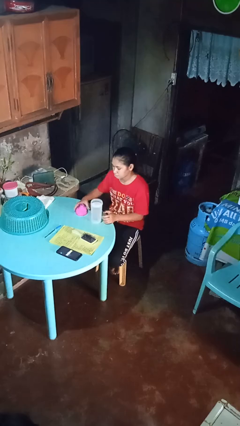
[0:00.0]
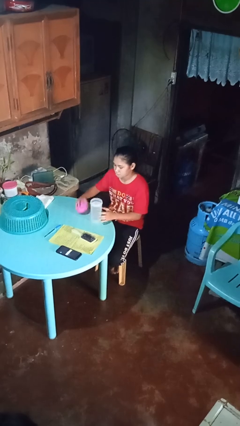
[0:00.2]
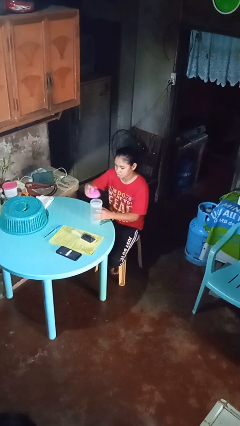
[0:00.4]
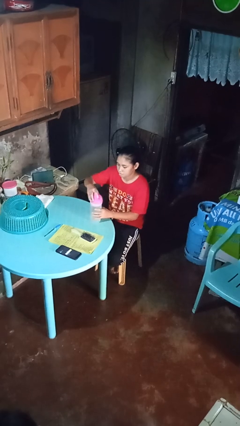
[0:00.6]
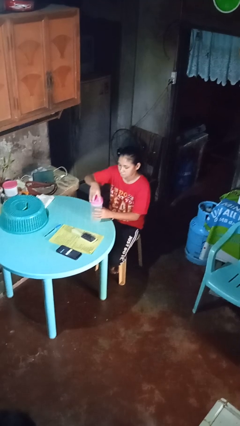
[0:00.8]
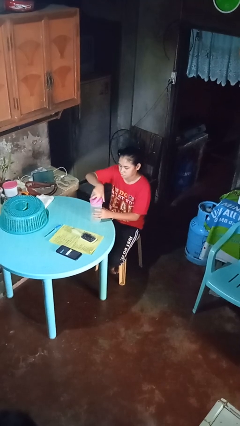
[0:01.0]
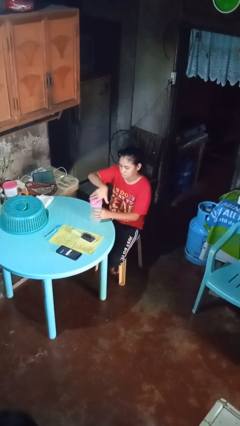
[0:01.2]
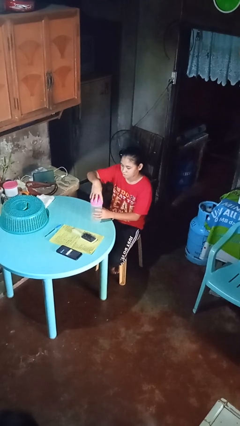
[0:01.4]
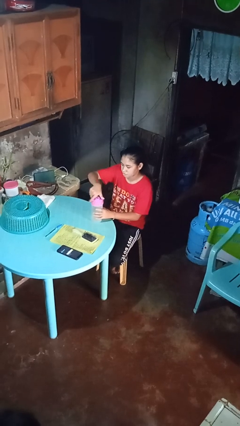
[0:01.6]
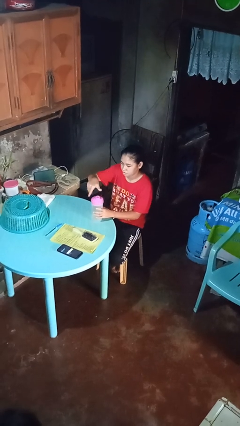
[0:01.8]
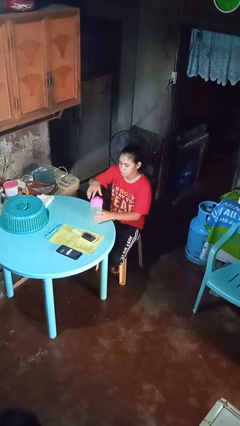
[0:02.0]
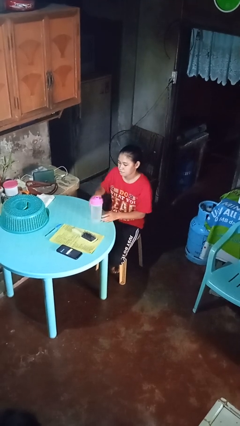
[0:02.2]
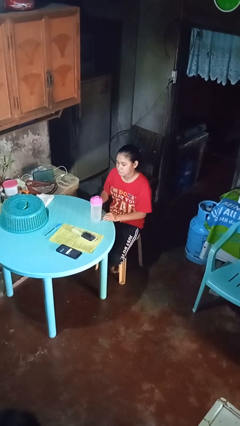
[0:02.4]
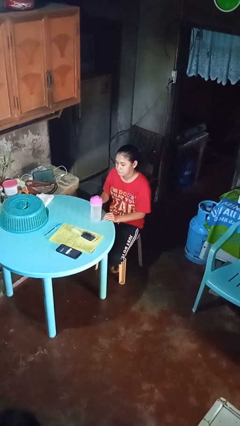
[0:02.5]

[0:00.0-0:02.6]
person screws lid to bottle

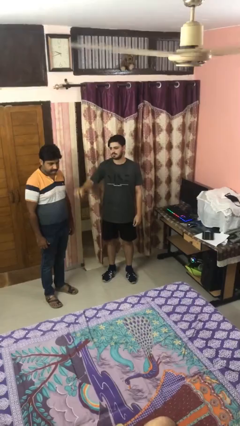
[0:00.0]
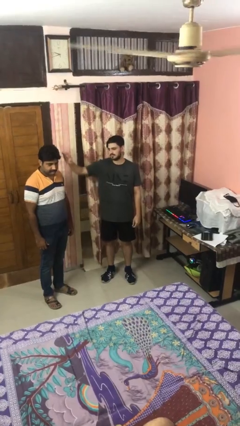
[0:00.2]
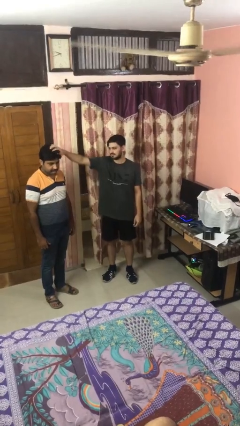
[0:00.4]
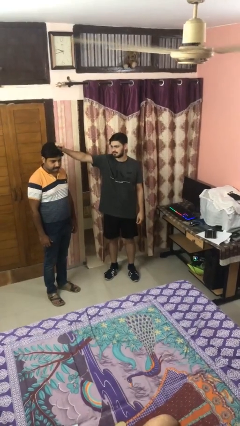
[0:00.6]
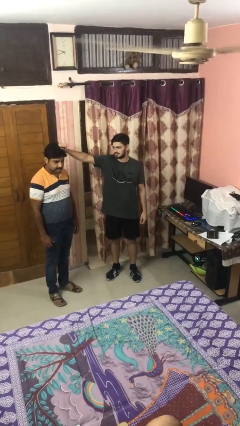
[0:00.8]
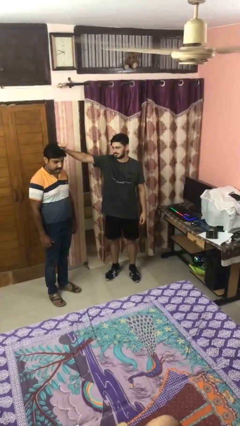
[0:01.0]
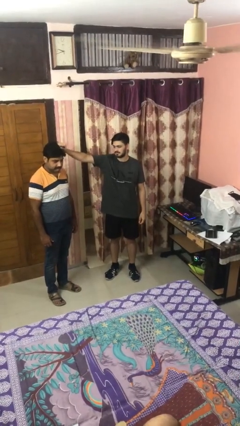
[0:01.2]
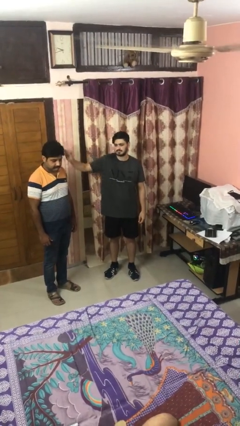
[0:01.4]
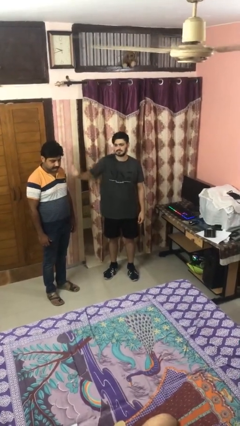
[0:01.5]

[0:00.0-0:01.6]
person grabs person by hair

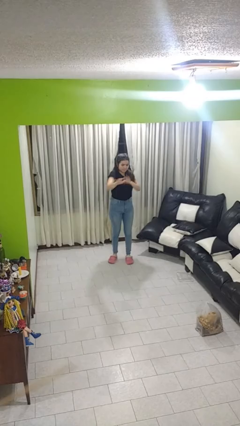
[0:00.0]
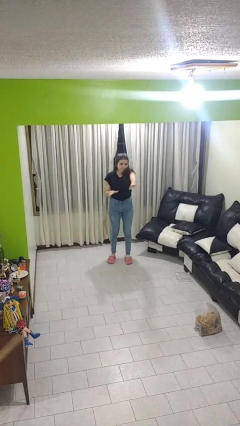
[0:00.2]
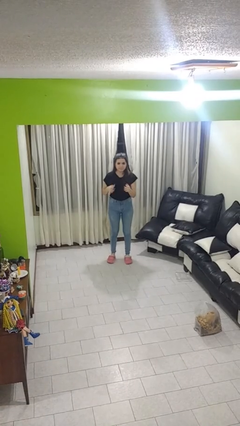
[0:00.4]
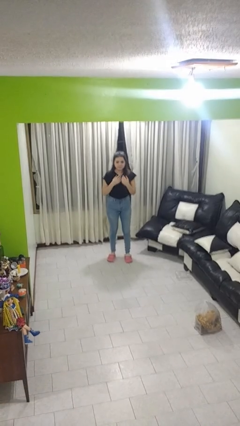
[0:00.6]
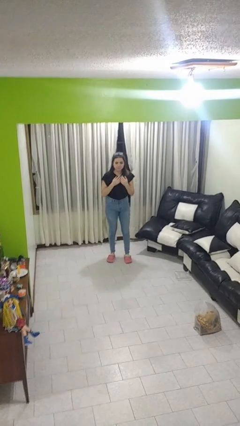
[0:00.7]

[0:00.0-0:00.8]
person karate chop

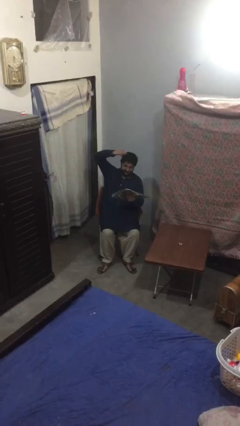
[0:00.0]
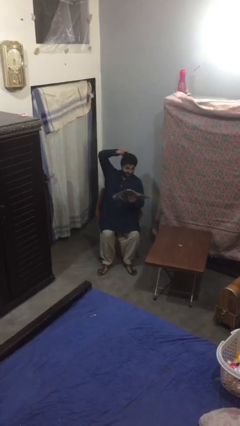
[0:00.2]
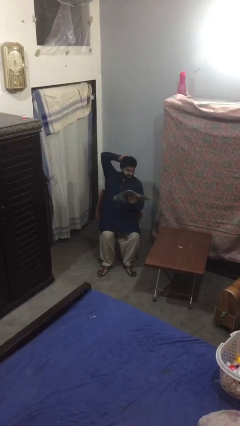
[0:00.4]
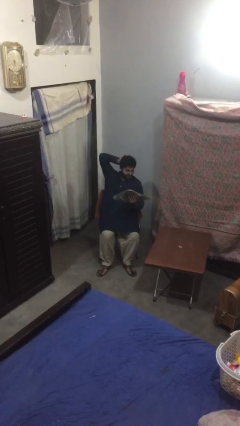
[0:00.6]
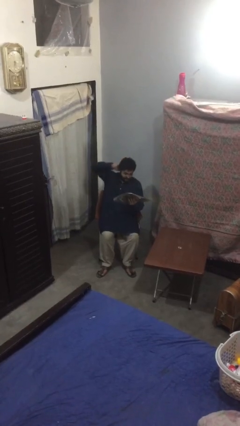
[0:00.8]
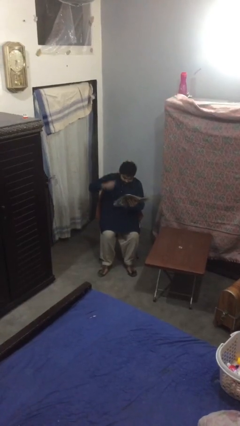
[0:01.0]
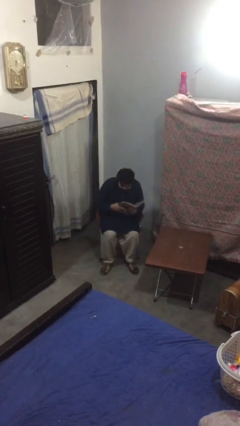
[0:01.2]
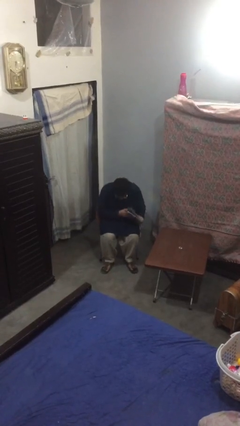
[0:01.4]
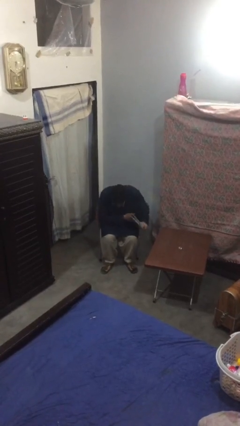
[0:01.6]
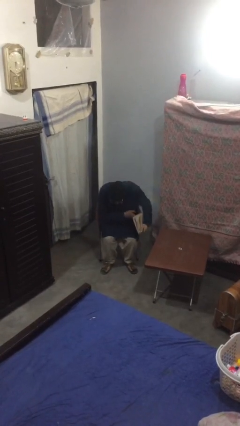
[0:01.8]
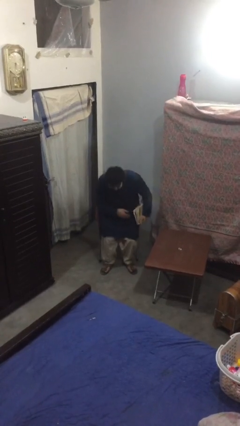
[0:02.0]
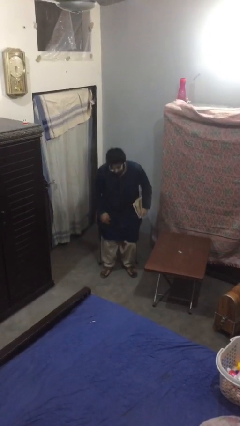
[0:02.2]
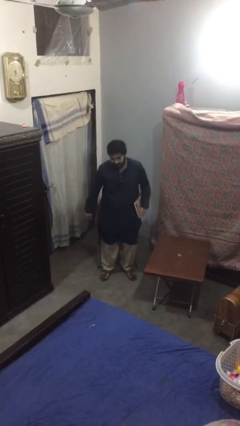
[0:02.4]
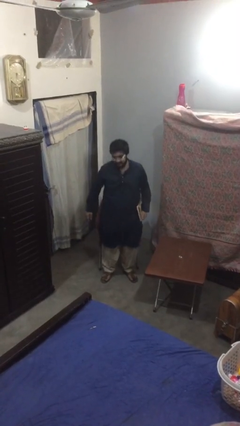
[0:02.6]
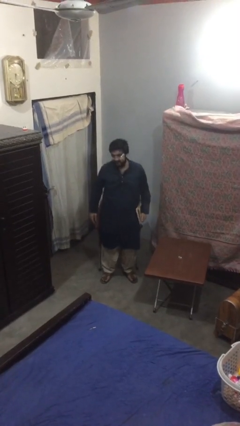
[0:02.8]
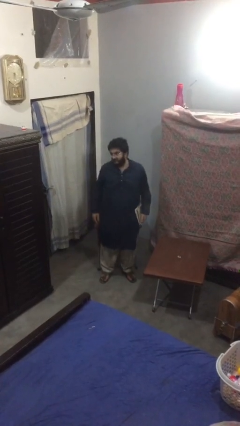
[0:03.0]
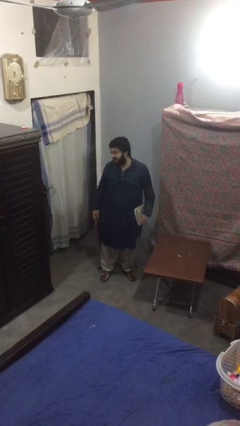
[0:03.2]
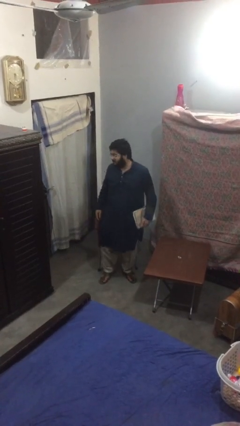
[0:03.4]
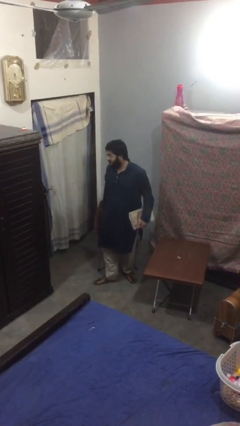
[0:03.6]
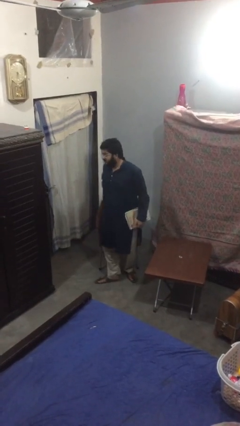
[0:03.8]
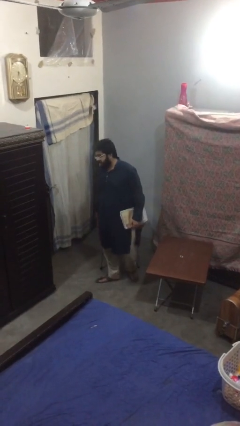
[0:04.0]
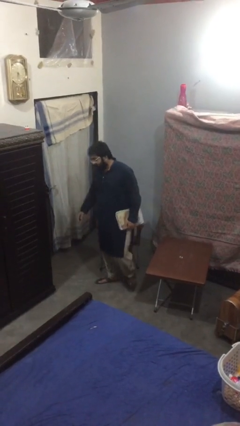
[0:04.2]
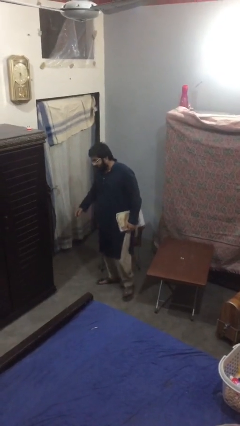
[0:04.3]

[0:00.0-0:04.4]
person stands up

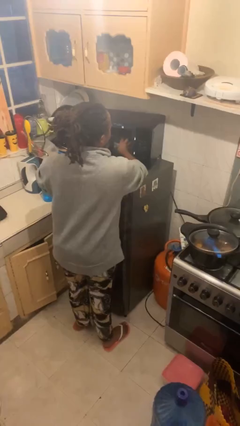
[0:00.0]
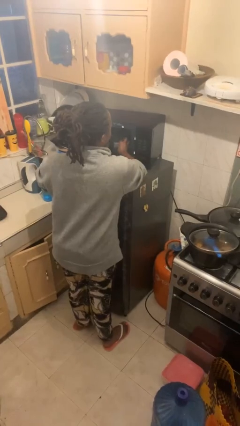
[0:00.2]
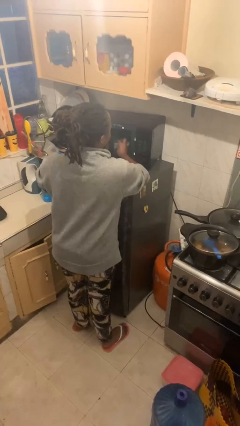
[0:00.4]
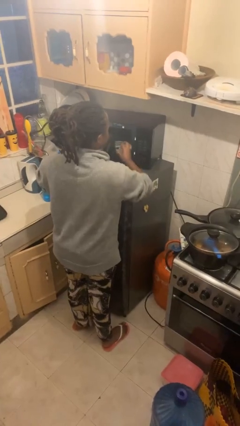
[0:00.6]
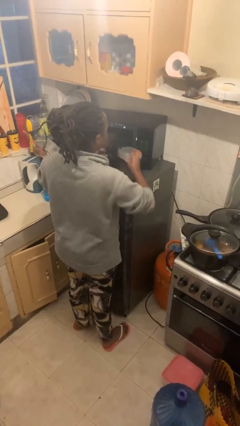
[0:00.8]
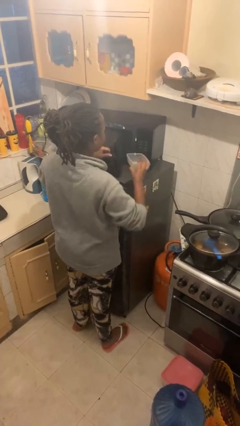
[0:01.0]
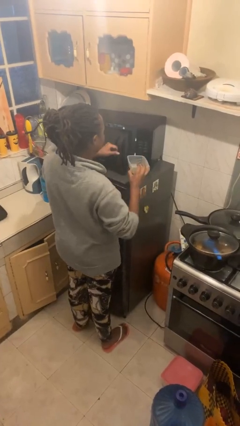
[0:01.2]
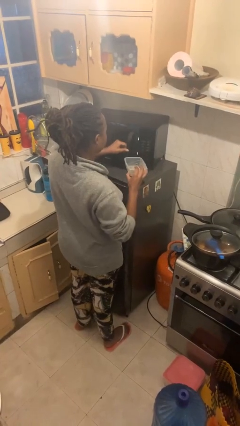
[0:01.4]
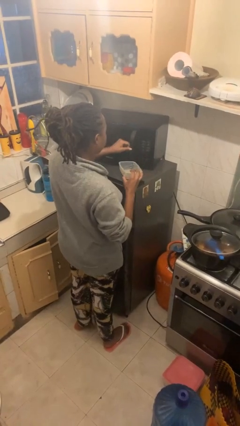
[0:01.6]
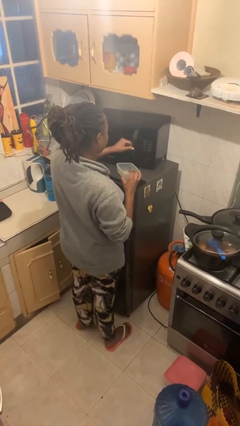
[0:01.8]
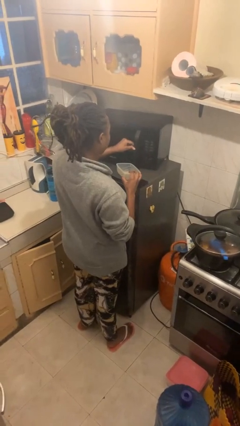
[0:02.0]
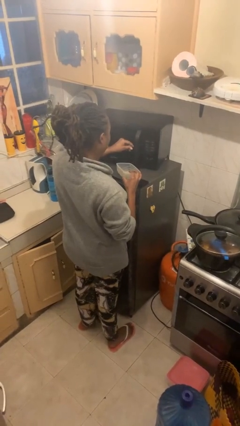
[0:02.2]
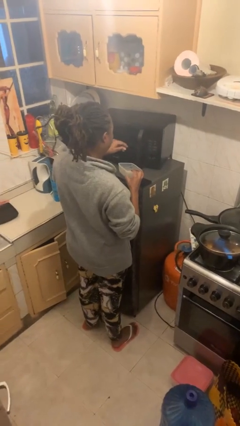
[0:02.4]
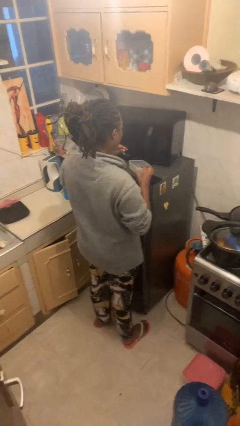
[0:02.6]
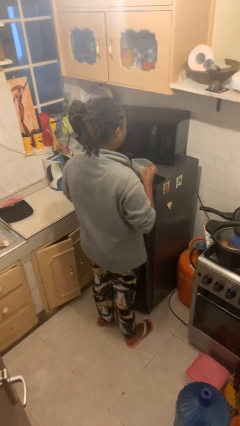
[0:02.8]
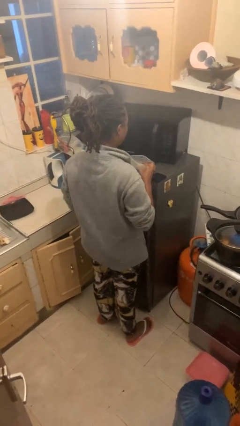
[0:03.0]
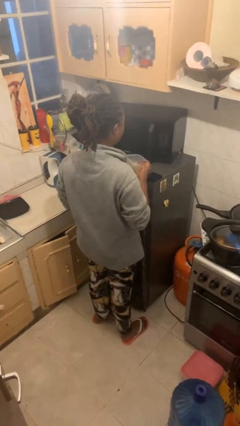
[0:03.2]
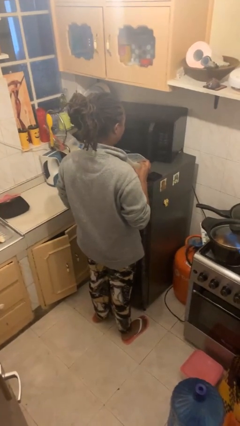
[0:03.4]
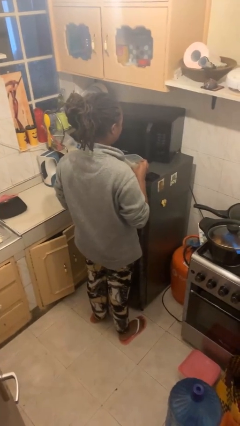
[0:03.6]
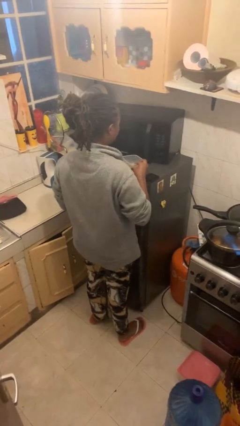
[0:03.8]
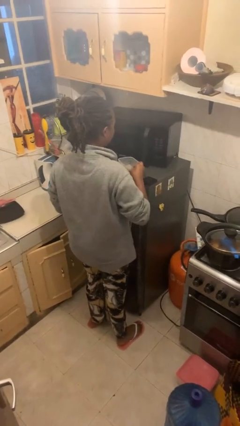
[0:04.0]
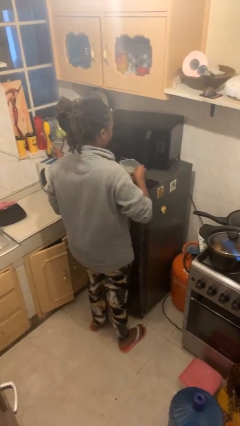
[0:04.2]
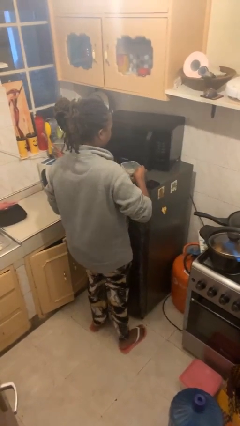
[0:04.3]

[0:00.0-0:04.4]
person takes object from microwave

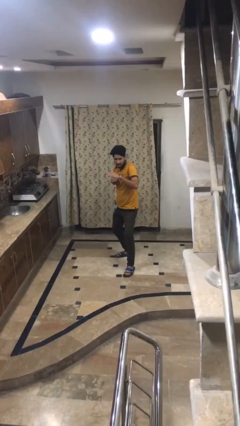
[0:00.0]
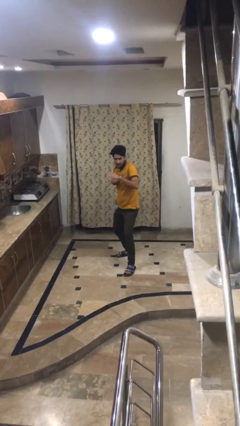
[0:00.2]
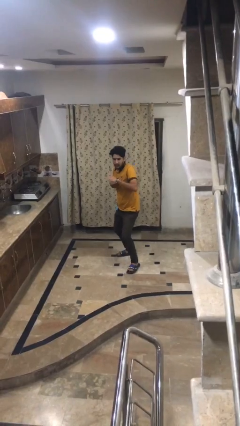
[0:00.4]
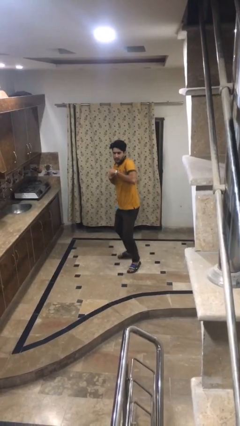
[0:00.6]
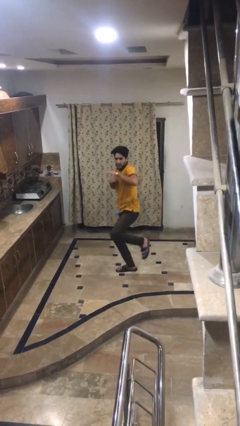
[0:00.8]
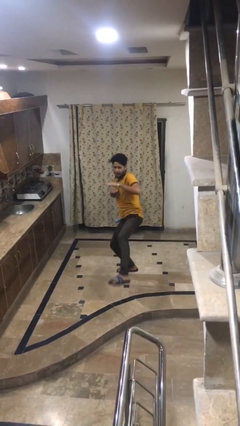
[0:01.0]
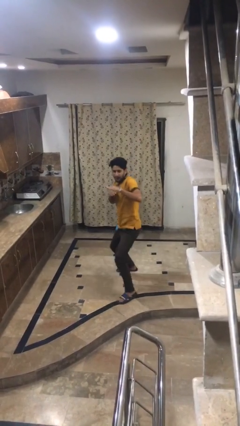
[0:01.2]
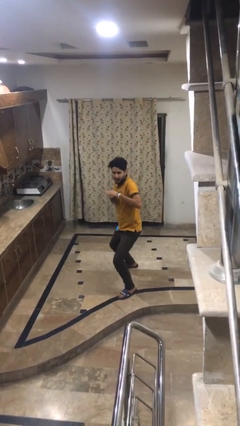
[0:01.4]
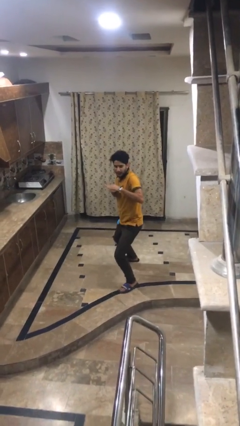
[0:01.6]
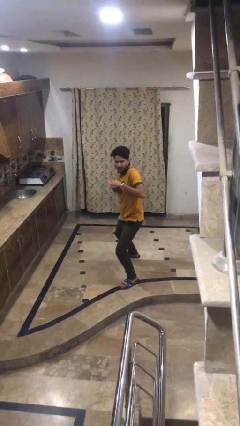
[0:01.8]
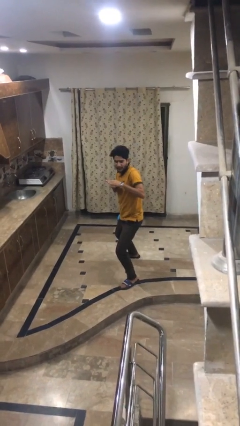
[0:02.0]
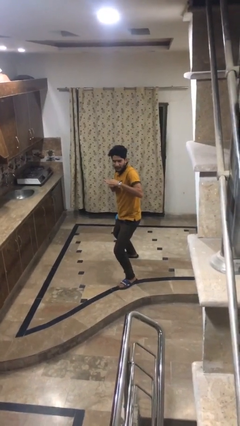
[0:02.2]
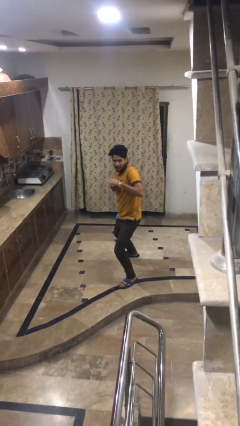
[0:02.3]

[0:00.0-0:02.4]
person karate kicks

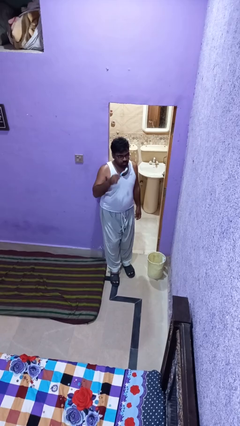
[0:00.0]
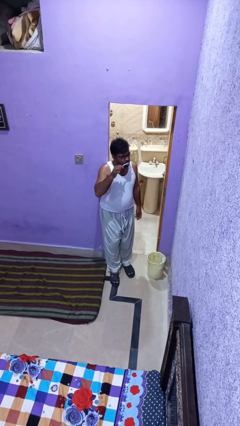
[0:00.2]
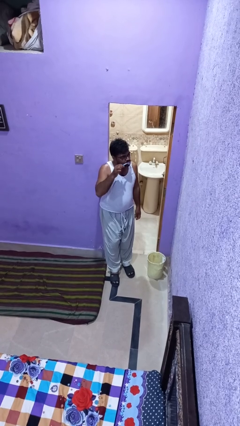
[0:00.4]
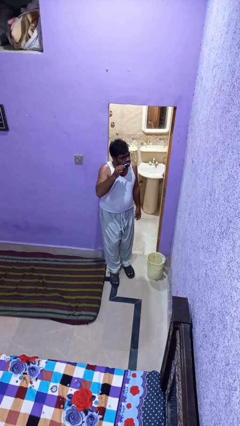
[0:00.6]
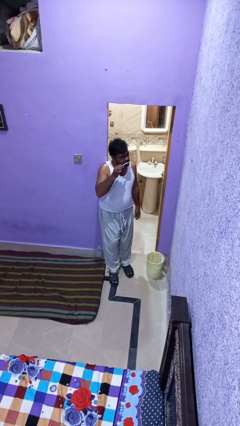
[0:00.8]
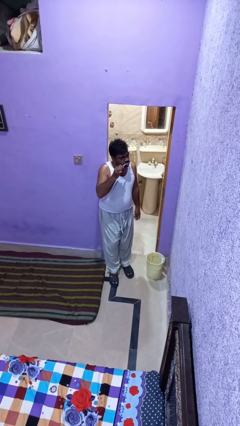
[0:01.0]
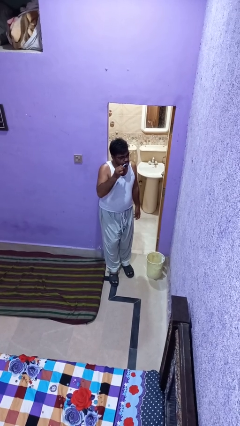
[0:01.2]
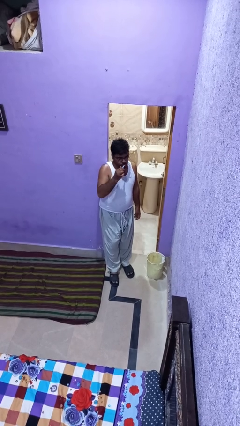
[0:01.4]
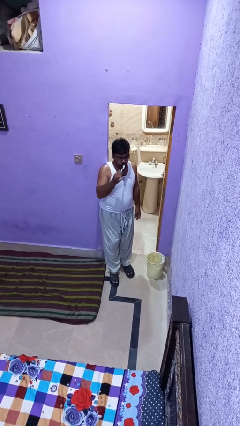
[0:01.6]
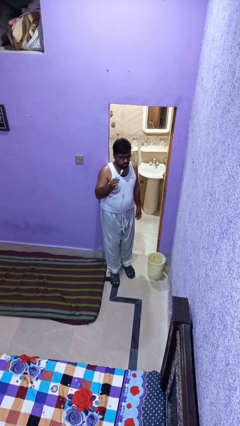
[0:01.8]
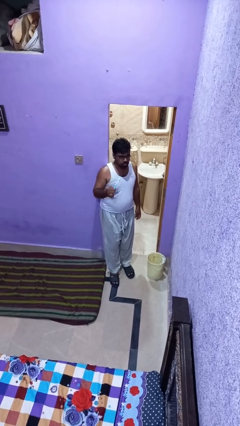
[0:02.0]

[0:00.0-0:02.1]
person brushes teeth
